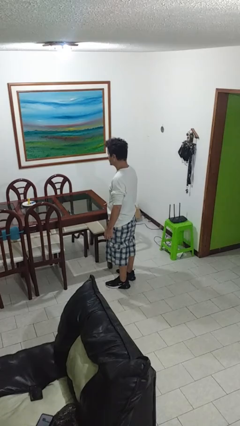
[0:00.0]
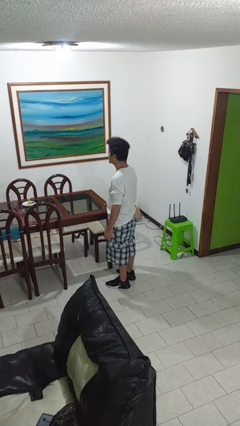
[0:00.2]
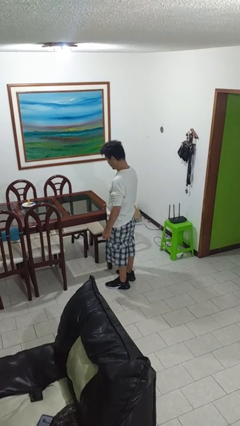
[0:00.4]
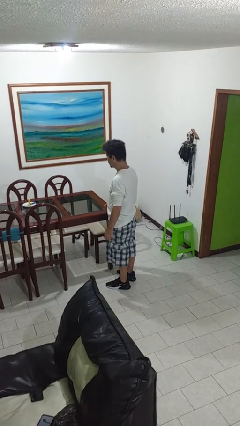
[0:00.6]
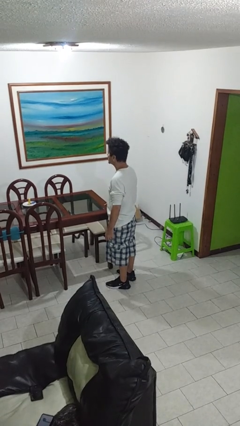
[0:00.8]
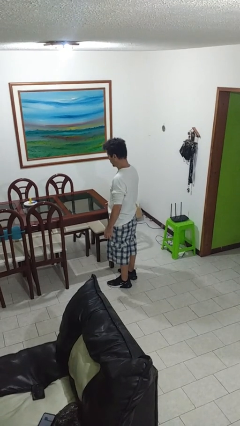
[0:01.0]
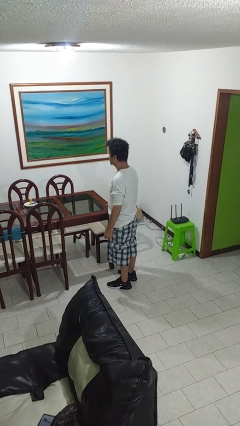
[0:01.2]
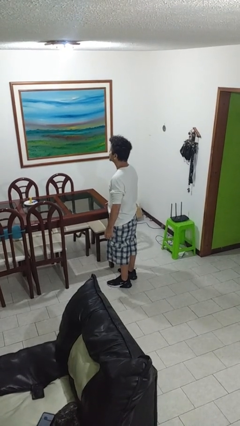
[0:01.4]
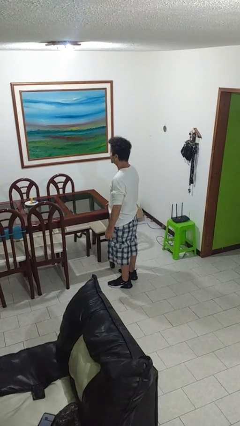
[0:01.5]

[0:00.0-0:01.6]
person nods head

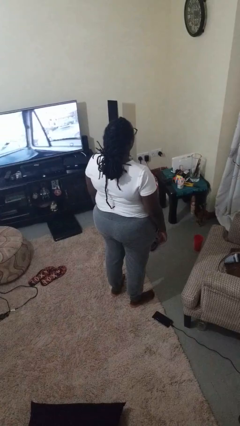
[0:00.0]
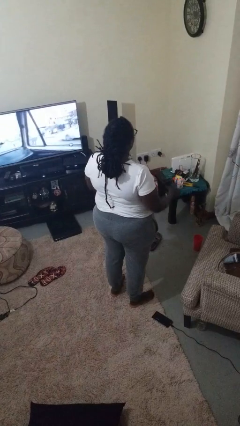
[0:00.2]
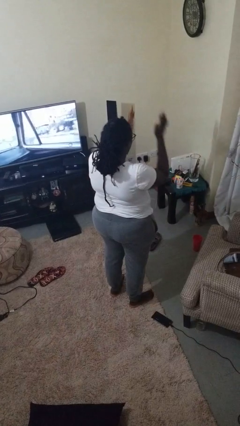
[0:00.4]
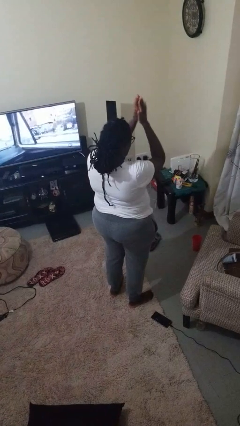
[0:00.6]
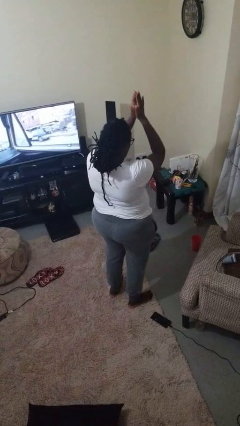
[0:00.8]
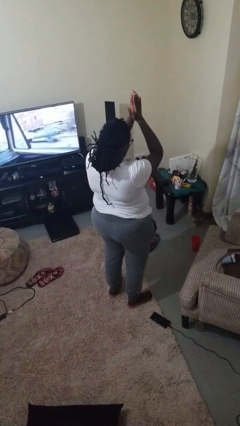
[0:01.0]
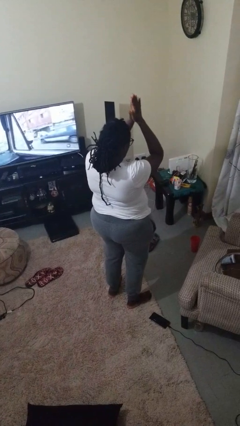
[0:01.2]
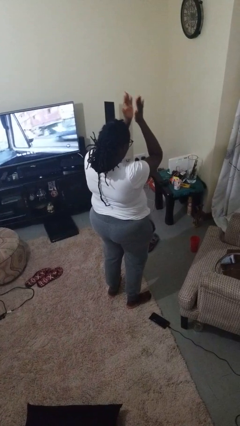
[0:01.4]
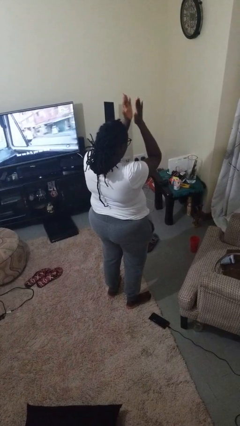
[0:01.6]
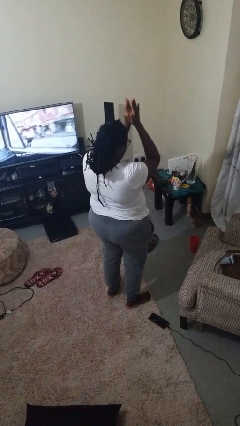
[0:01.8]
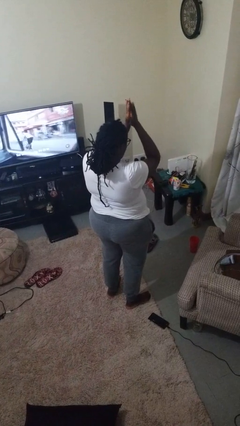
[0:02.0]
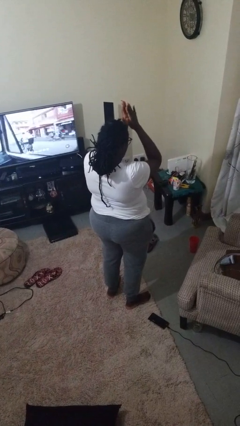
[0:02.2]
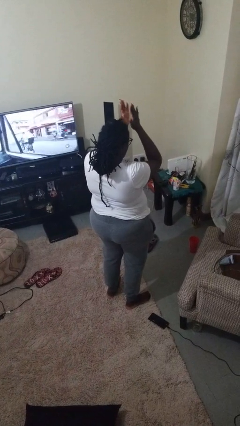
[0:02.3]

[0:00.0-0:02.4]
person claps hands

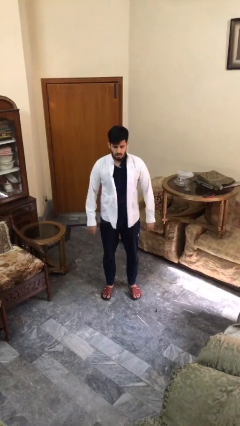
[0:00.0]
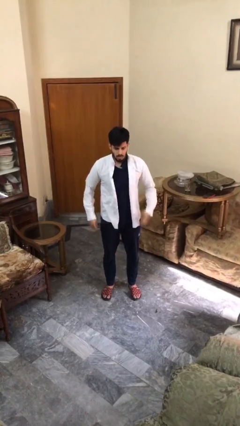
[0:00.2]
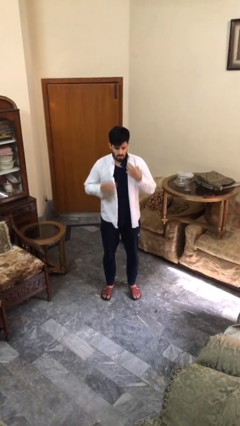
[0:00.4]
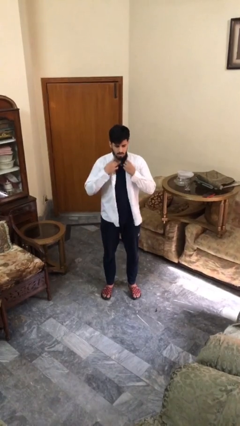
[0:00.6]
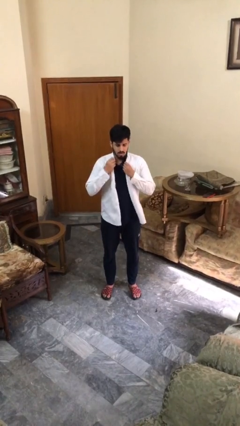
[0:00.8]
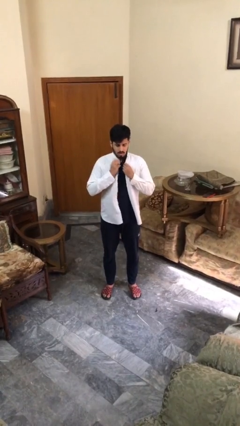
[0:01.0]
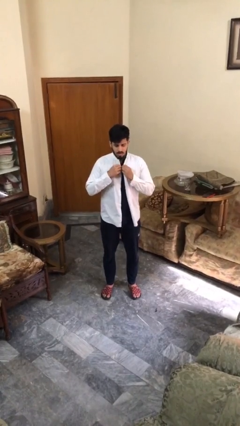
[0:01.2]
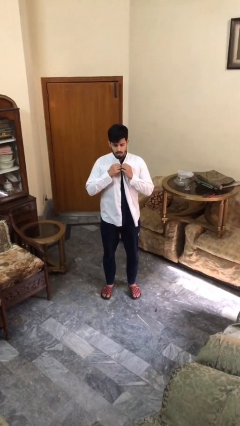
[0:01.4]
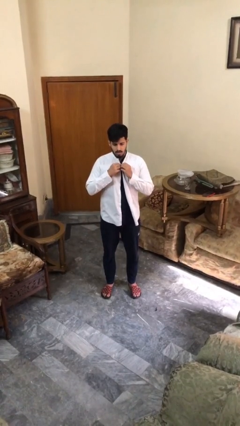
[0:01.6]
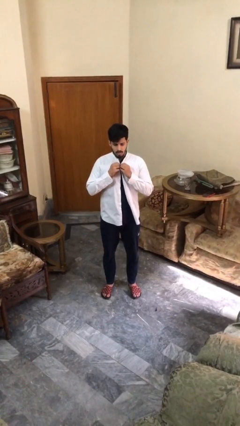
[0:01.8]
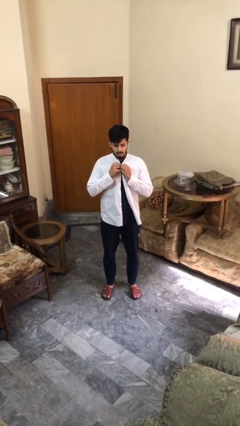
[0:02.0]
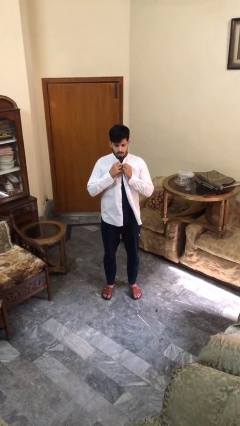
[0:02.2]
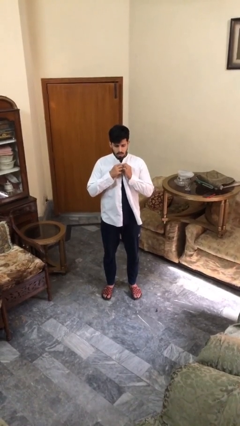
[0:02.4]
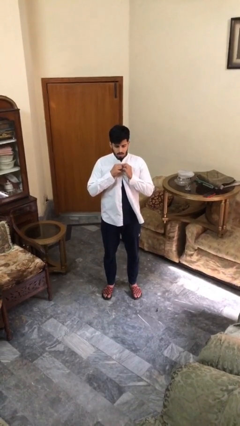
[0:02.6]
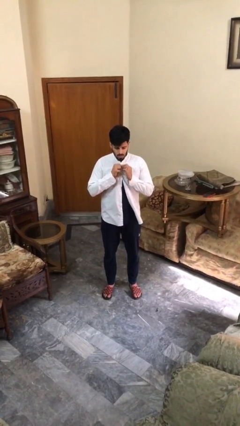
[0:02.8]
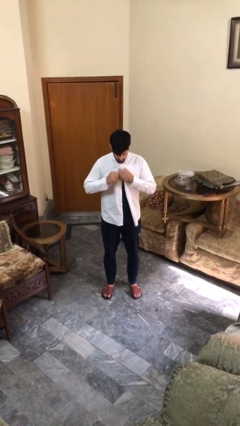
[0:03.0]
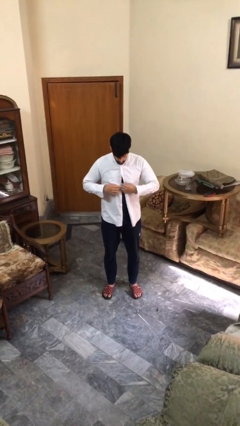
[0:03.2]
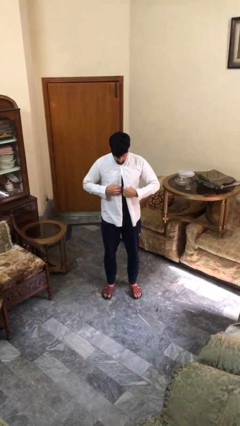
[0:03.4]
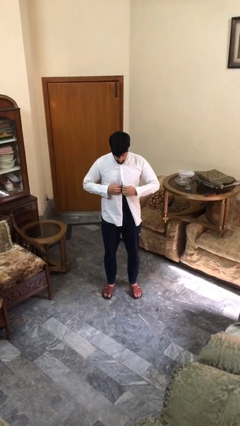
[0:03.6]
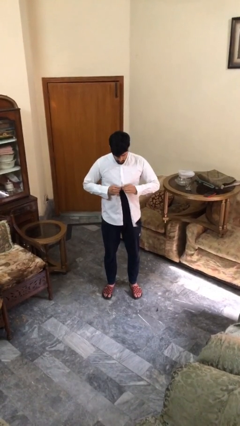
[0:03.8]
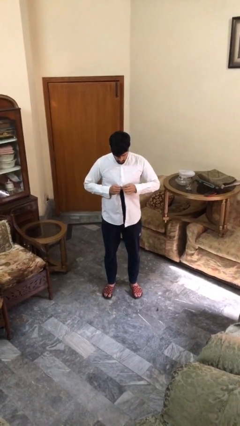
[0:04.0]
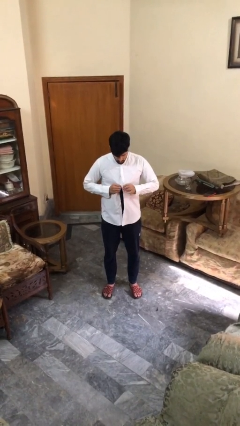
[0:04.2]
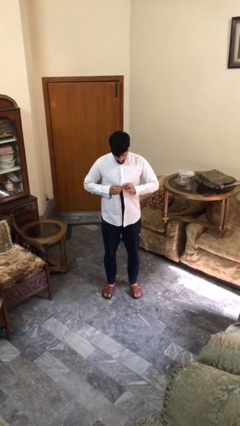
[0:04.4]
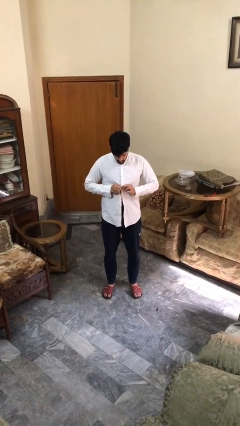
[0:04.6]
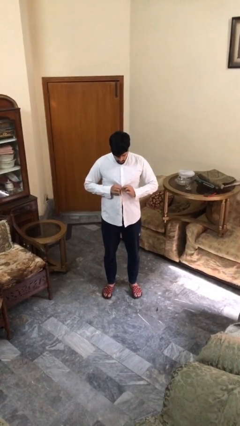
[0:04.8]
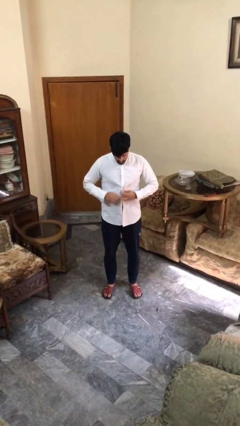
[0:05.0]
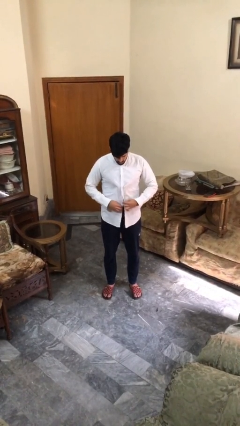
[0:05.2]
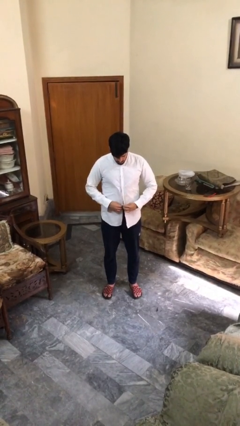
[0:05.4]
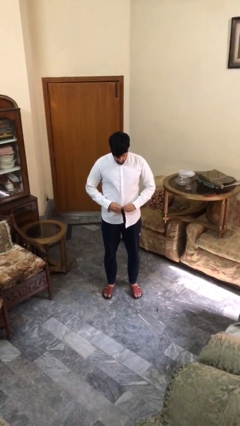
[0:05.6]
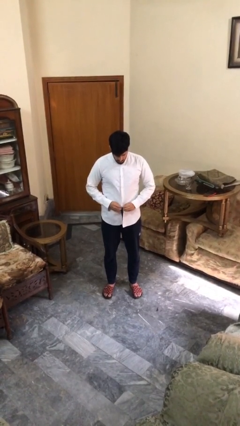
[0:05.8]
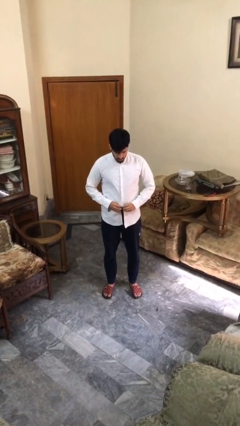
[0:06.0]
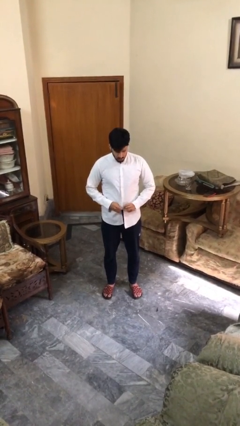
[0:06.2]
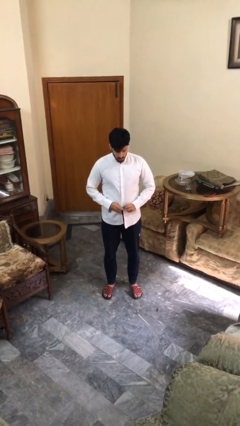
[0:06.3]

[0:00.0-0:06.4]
person buttons shirt

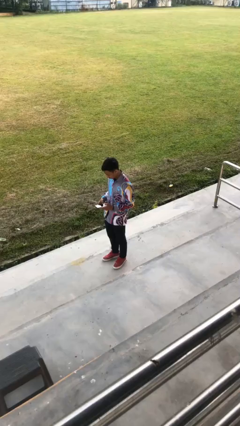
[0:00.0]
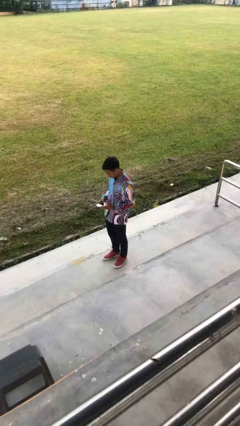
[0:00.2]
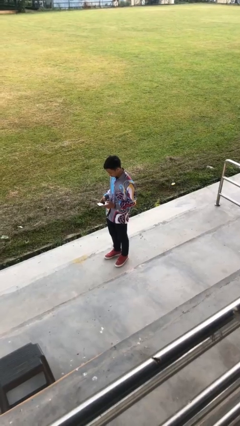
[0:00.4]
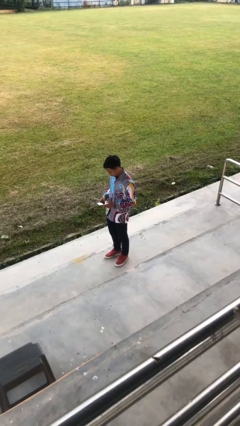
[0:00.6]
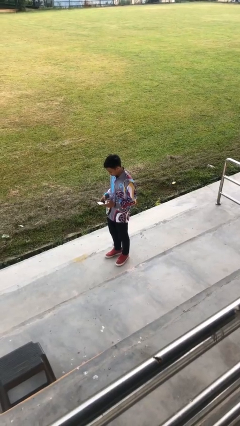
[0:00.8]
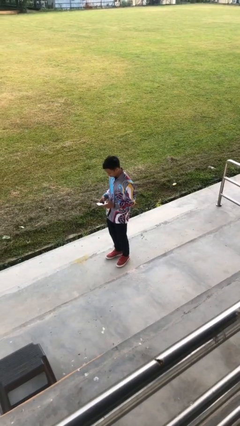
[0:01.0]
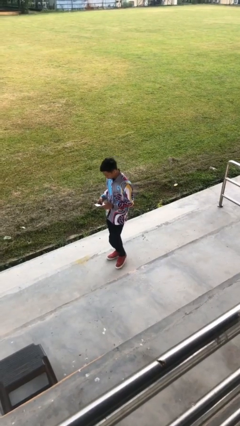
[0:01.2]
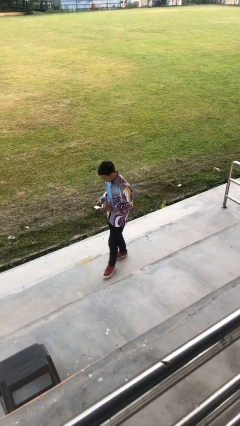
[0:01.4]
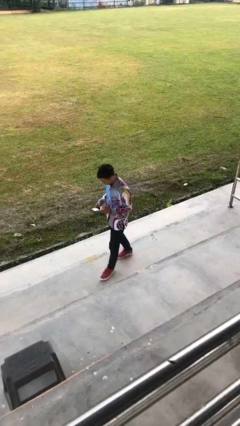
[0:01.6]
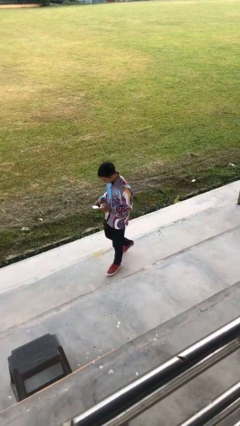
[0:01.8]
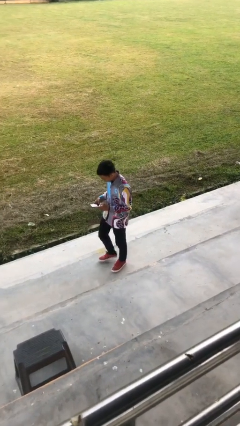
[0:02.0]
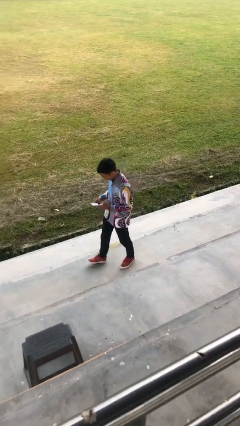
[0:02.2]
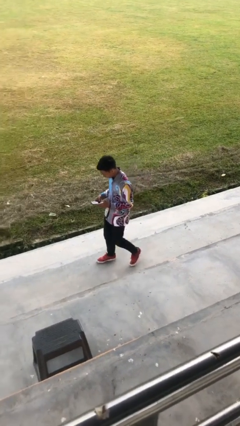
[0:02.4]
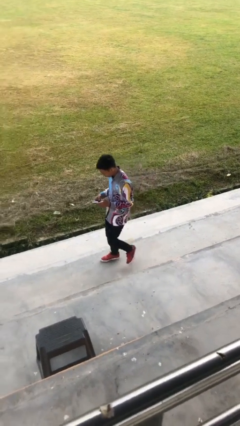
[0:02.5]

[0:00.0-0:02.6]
person texts on phone

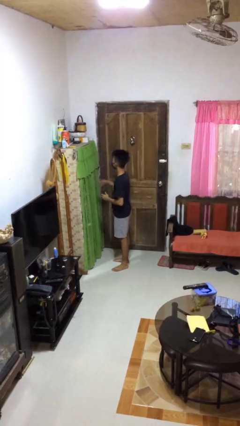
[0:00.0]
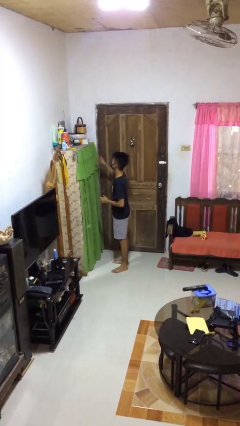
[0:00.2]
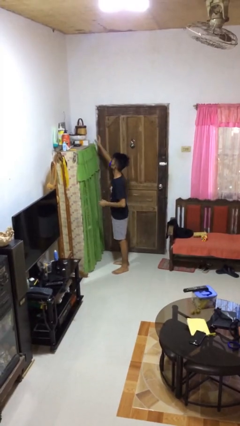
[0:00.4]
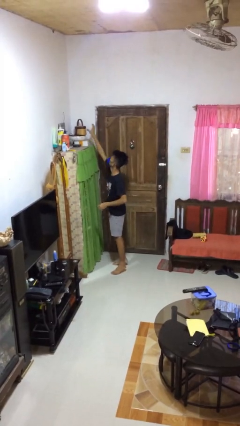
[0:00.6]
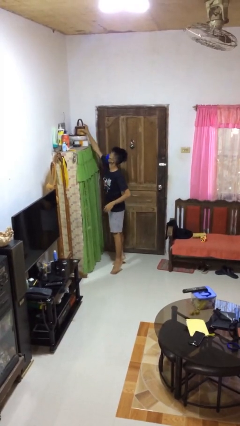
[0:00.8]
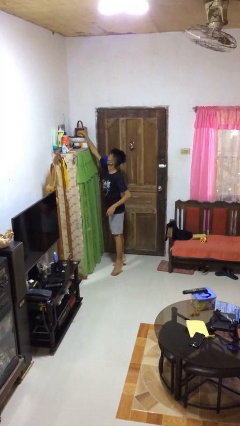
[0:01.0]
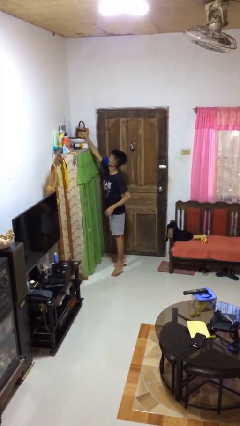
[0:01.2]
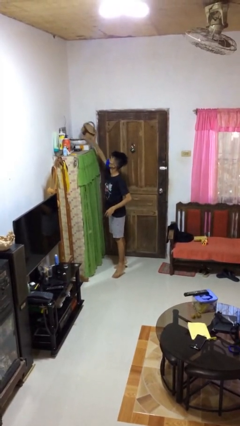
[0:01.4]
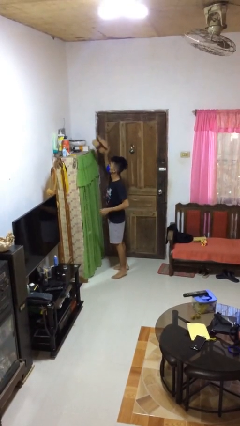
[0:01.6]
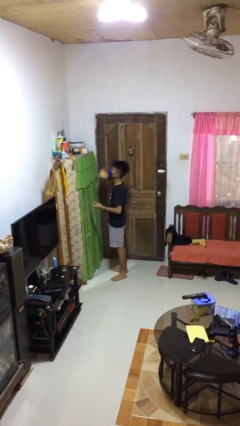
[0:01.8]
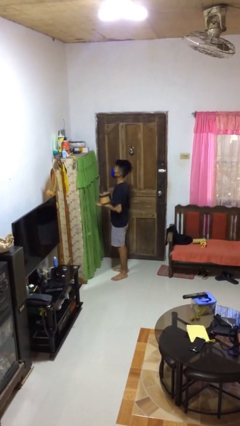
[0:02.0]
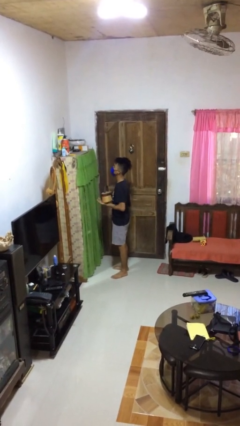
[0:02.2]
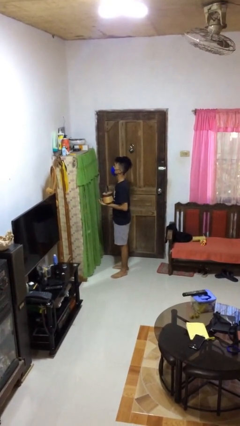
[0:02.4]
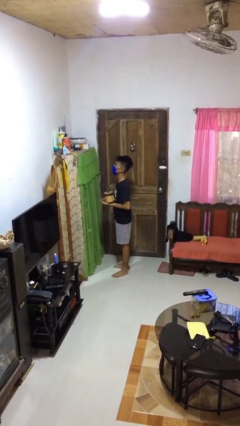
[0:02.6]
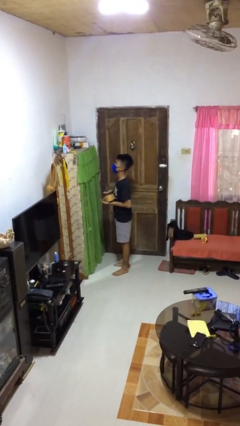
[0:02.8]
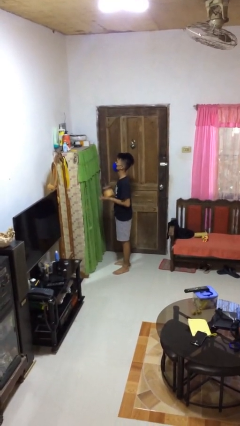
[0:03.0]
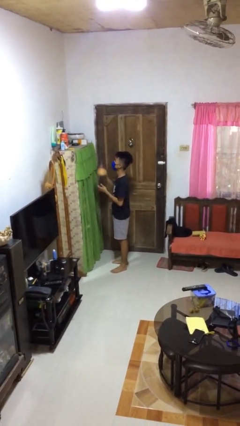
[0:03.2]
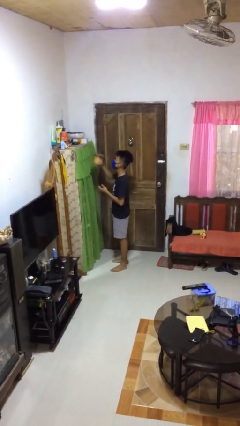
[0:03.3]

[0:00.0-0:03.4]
person picks up object from shelf

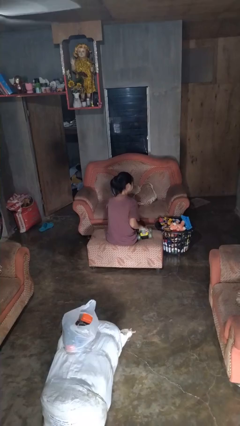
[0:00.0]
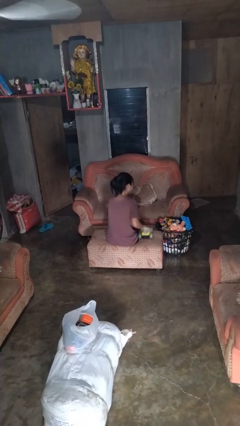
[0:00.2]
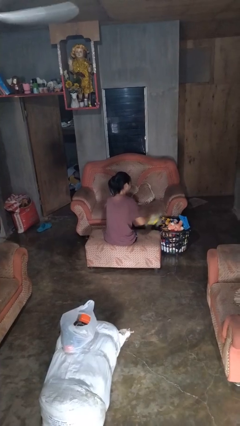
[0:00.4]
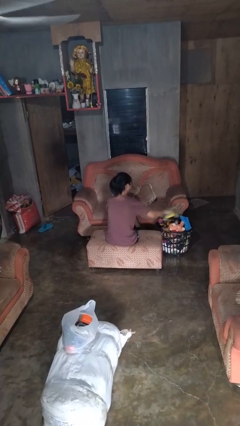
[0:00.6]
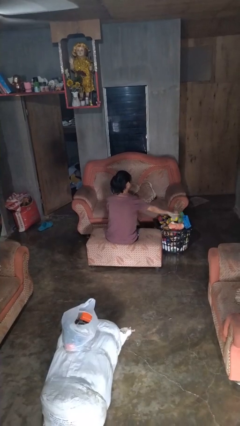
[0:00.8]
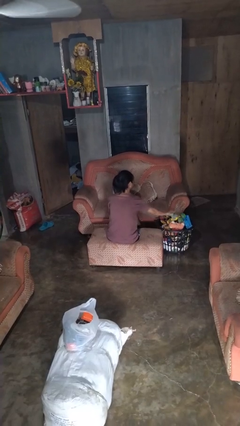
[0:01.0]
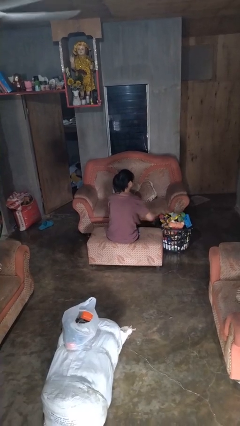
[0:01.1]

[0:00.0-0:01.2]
person puts object into basket

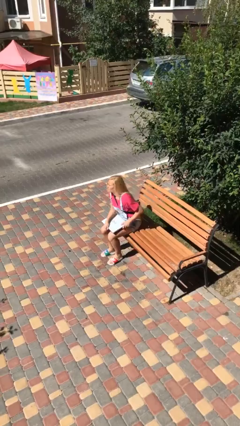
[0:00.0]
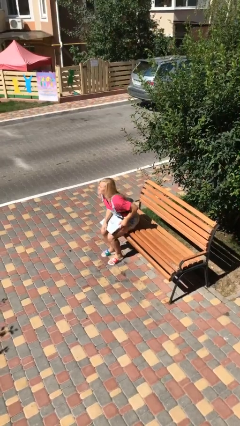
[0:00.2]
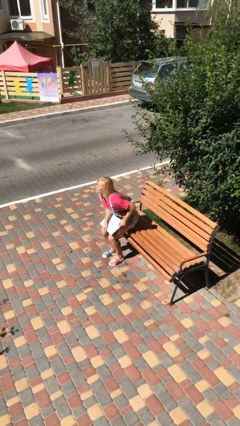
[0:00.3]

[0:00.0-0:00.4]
person stands up
